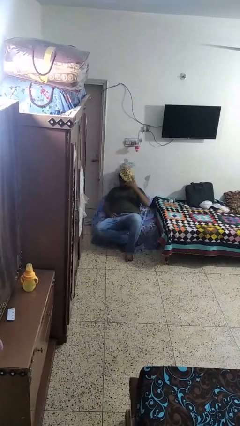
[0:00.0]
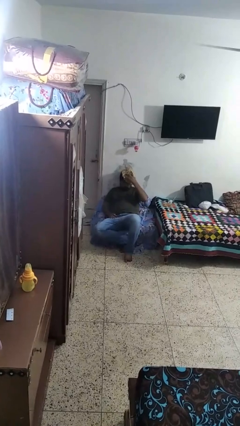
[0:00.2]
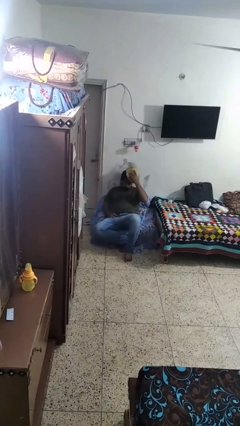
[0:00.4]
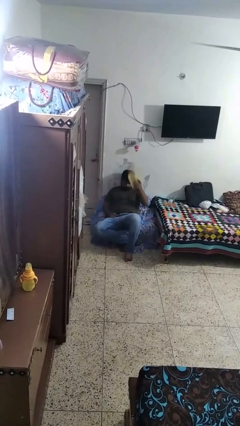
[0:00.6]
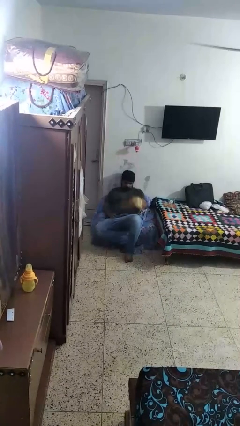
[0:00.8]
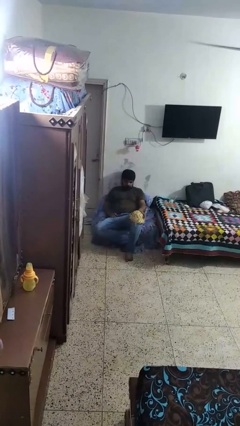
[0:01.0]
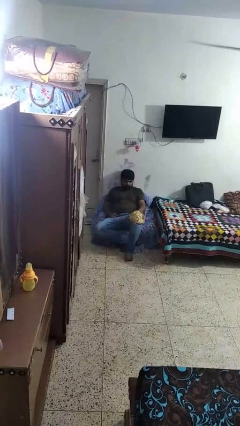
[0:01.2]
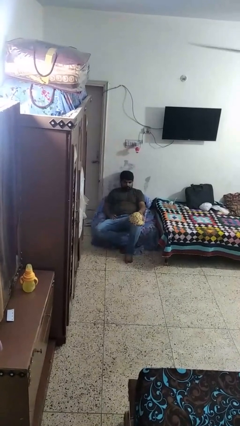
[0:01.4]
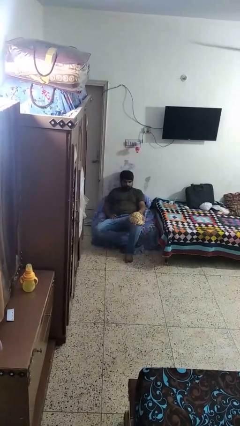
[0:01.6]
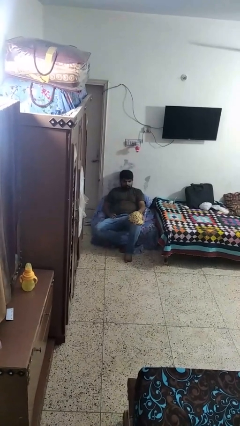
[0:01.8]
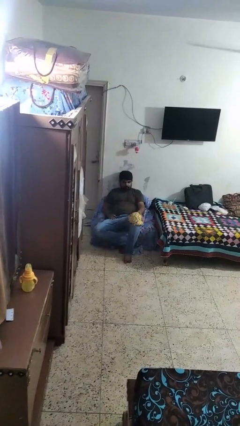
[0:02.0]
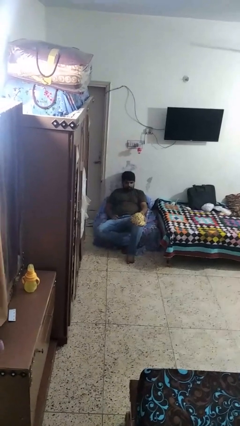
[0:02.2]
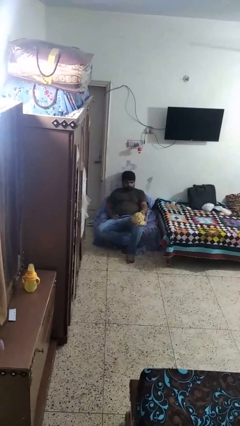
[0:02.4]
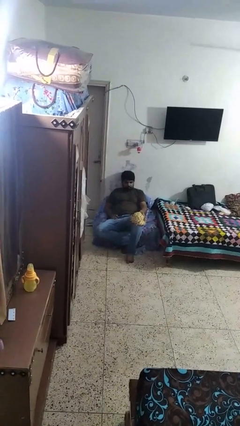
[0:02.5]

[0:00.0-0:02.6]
person takes off hat

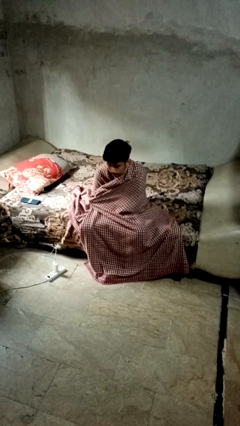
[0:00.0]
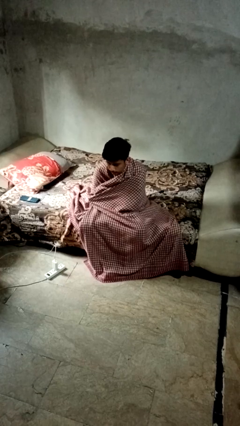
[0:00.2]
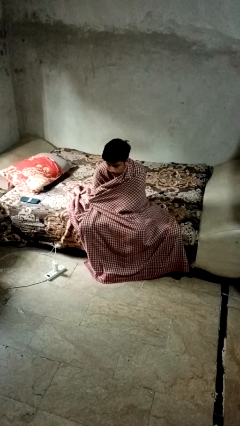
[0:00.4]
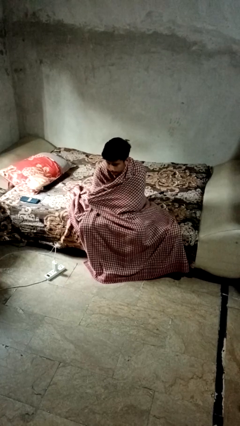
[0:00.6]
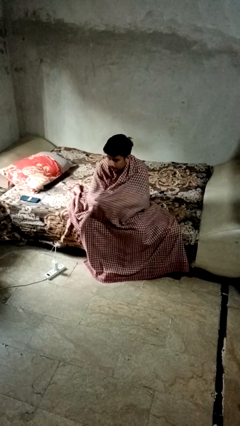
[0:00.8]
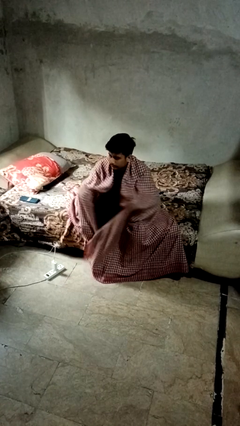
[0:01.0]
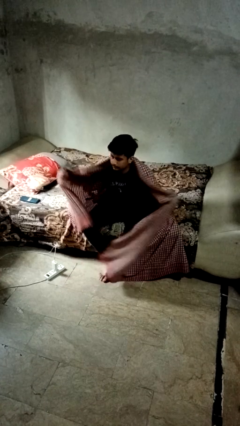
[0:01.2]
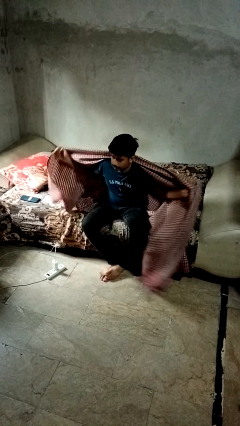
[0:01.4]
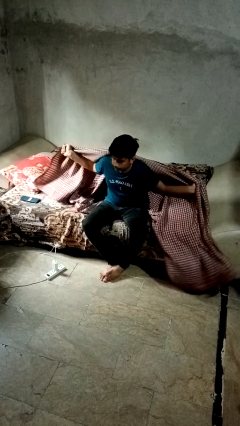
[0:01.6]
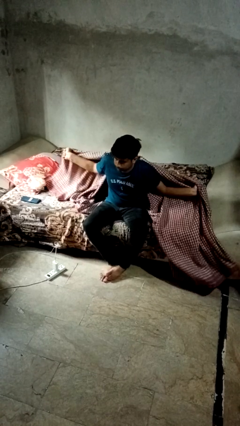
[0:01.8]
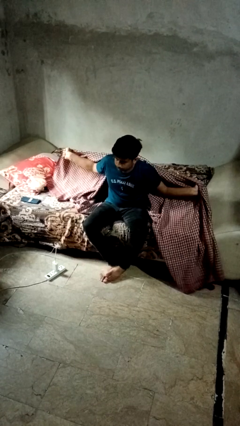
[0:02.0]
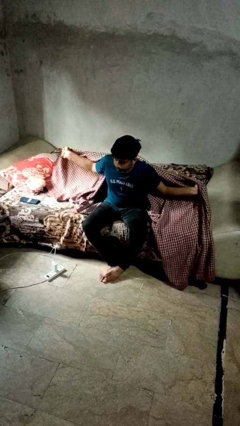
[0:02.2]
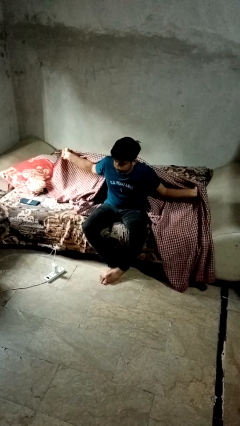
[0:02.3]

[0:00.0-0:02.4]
person uncovers with blanket

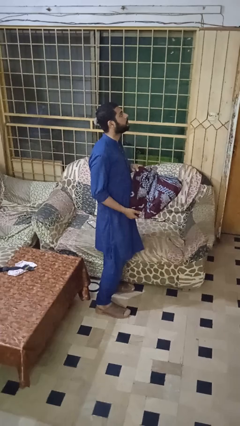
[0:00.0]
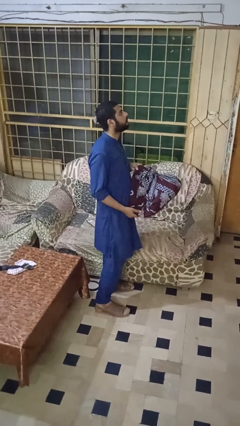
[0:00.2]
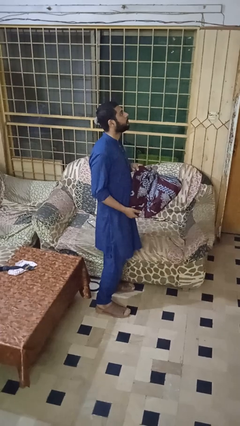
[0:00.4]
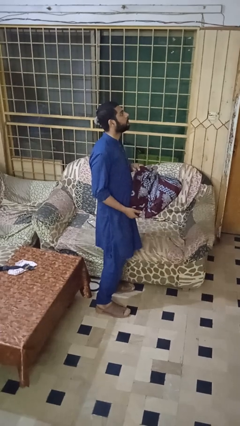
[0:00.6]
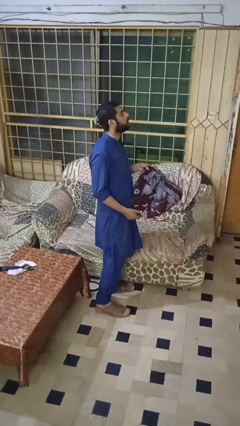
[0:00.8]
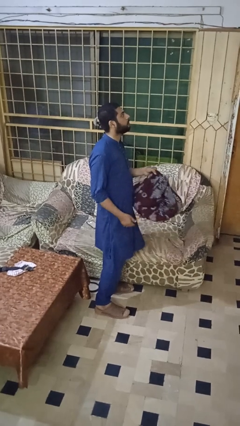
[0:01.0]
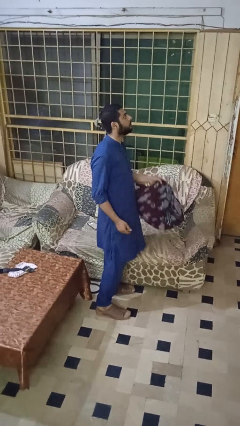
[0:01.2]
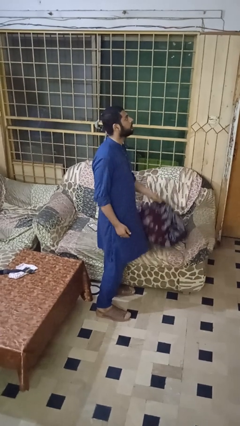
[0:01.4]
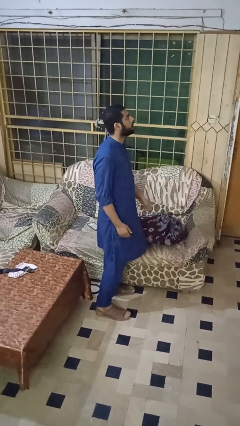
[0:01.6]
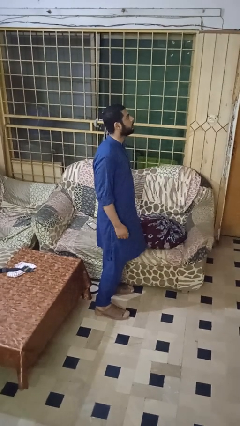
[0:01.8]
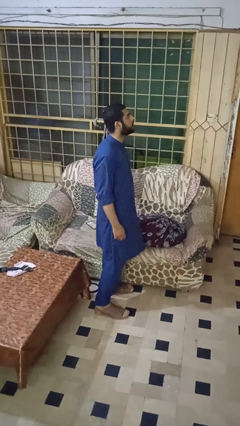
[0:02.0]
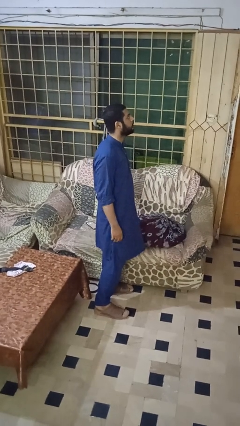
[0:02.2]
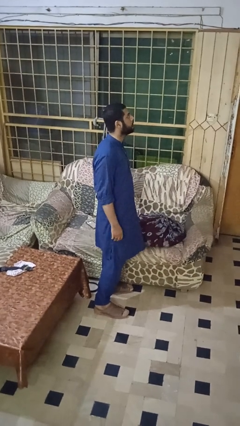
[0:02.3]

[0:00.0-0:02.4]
person puts down object on couch

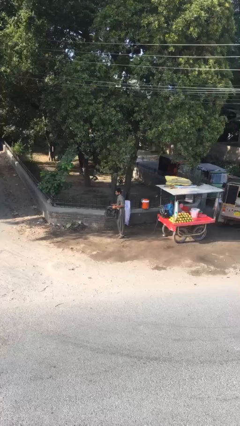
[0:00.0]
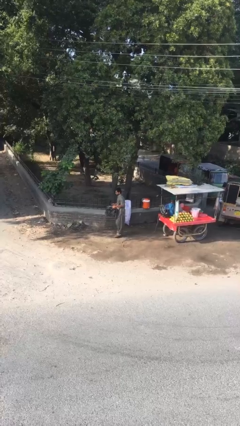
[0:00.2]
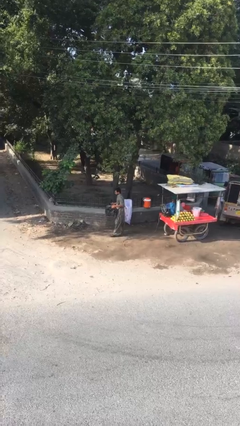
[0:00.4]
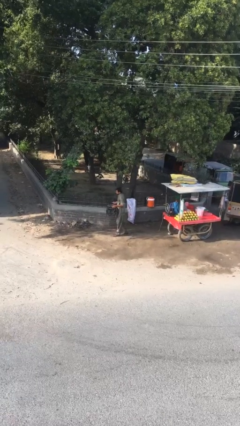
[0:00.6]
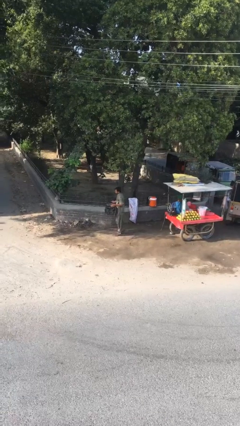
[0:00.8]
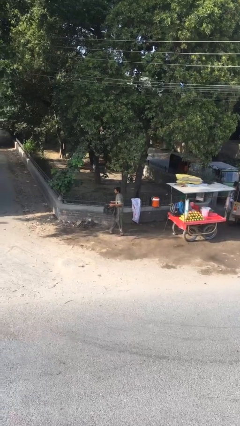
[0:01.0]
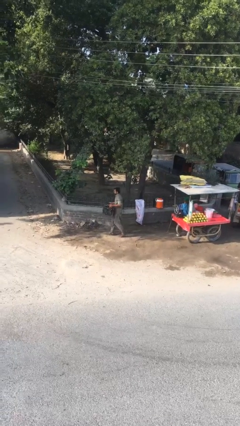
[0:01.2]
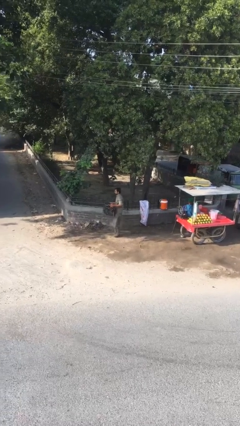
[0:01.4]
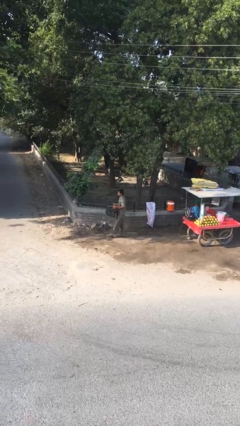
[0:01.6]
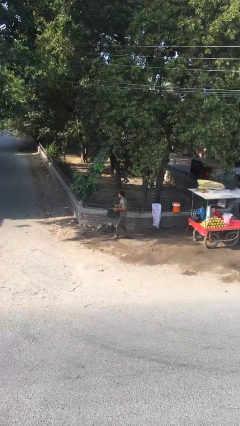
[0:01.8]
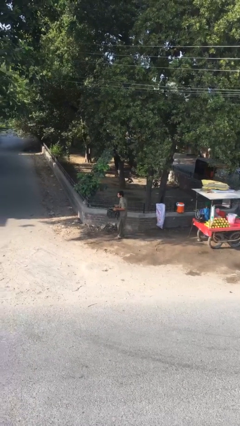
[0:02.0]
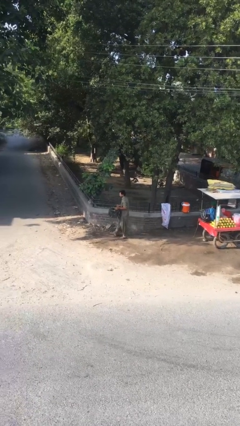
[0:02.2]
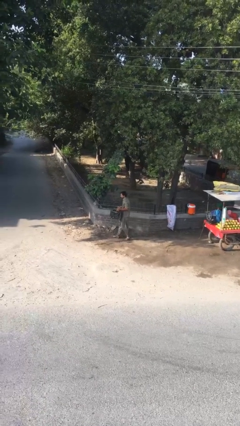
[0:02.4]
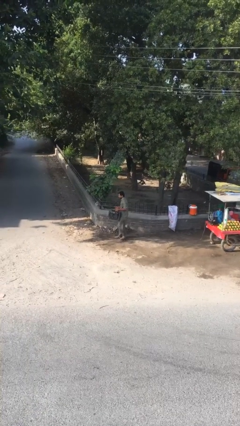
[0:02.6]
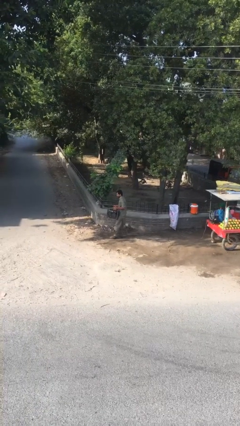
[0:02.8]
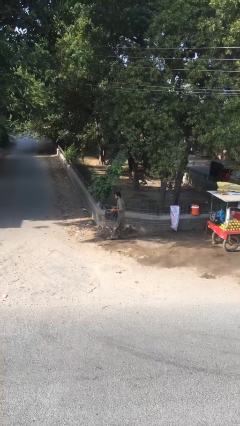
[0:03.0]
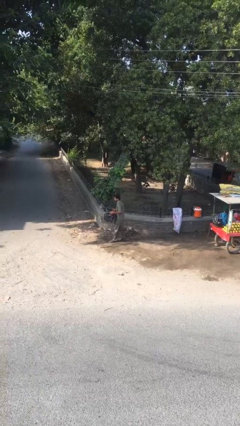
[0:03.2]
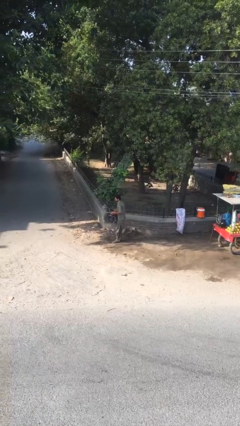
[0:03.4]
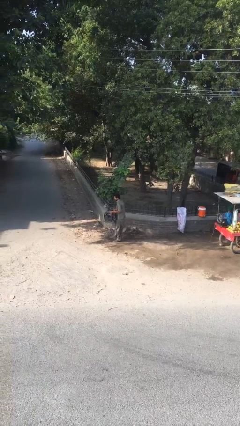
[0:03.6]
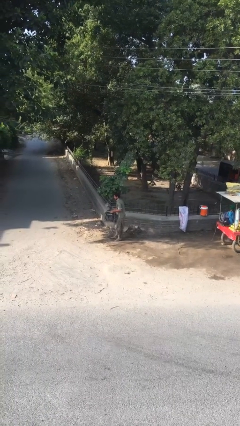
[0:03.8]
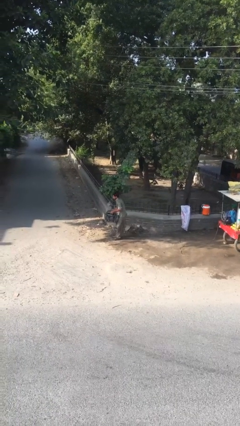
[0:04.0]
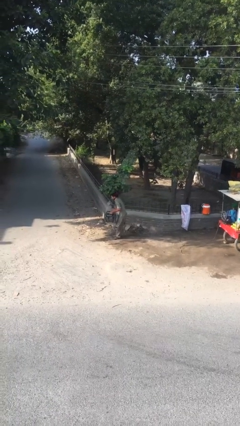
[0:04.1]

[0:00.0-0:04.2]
person carries heavy object

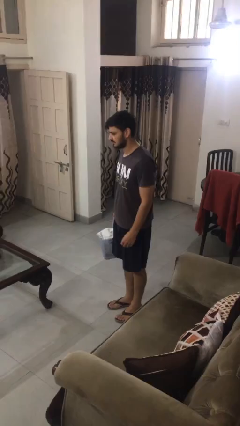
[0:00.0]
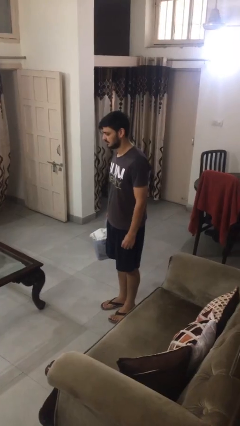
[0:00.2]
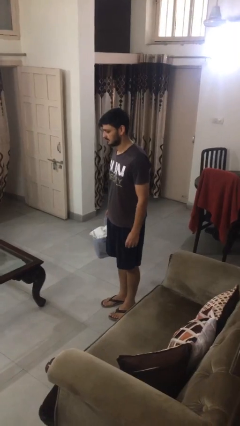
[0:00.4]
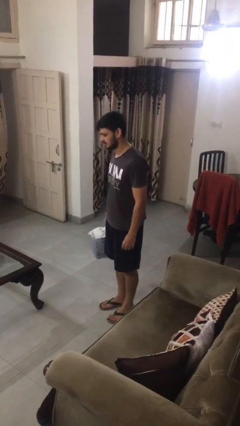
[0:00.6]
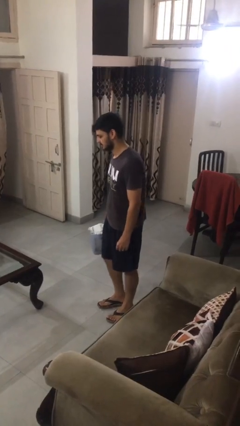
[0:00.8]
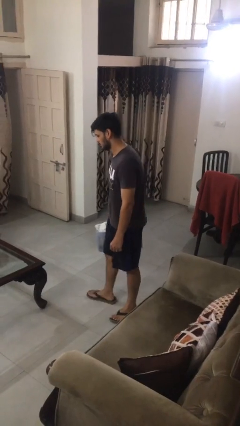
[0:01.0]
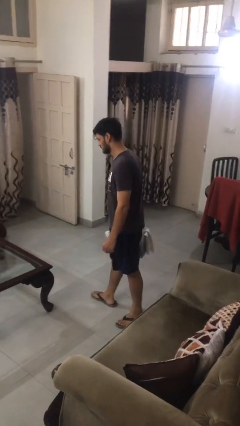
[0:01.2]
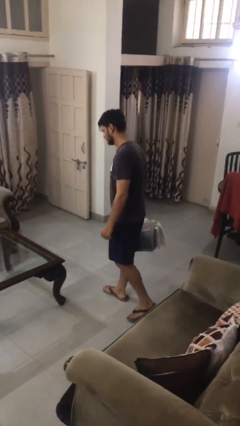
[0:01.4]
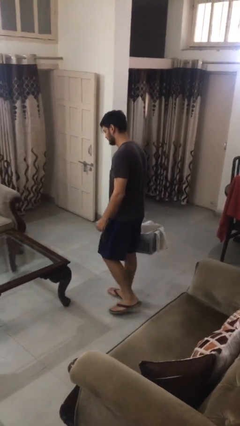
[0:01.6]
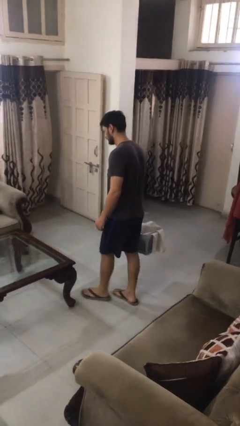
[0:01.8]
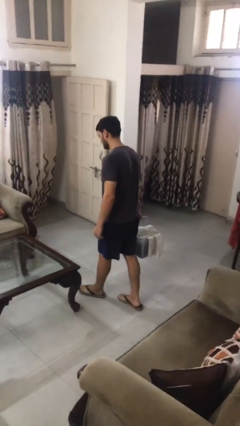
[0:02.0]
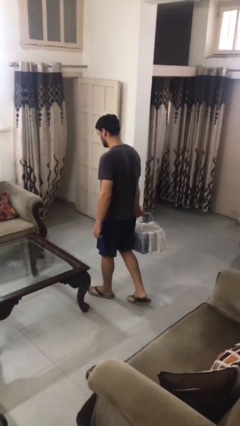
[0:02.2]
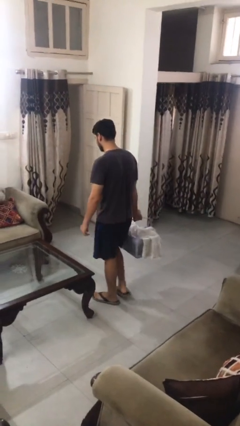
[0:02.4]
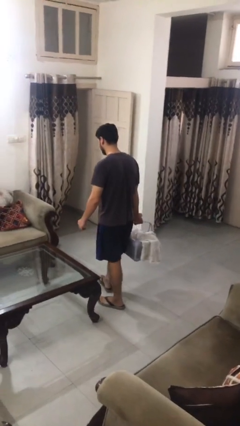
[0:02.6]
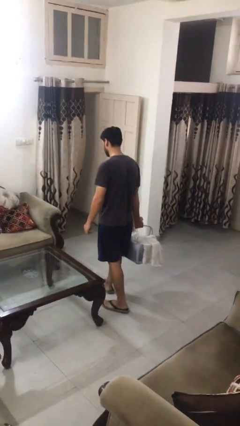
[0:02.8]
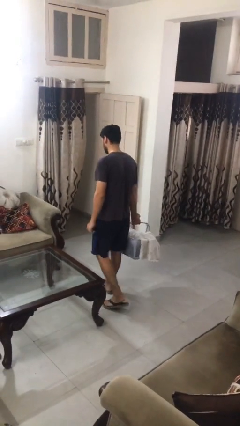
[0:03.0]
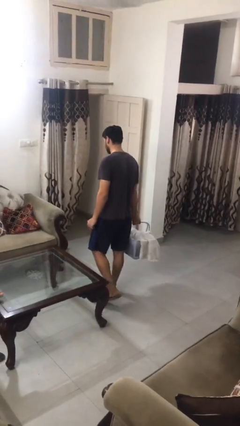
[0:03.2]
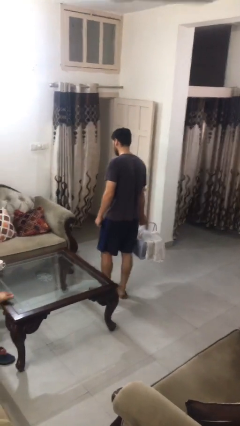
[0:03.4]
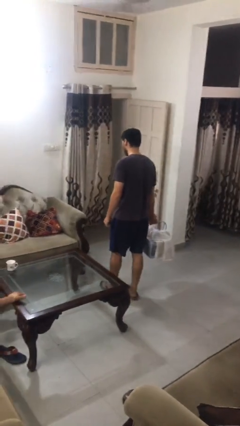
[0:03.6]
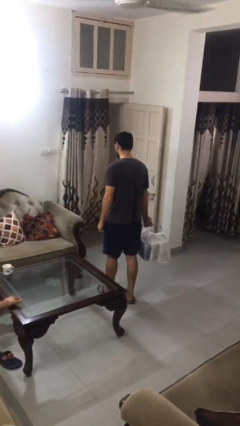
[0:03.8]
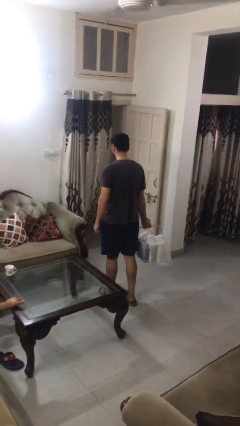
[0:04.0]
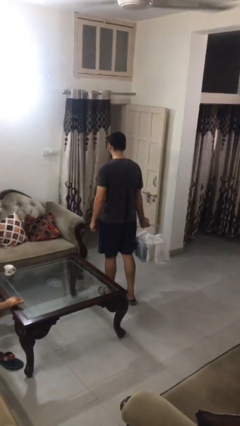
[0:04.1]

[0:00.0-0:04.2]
person carries laundry basket

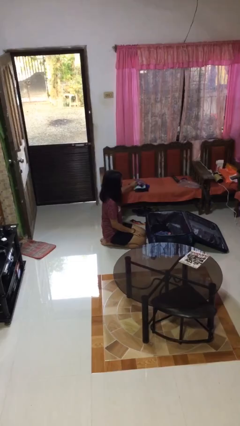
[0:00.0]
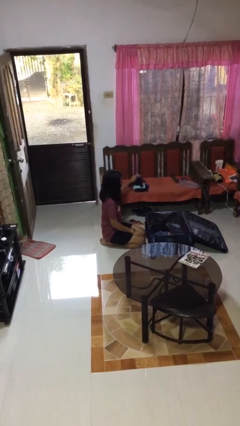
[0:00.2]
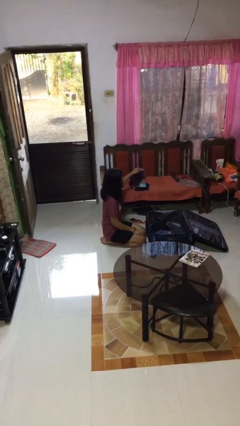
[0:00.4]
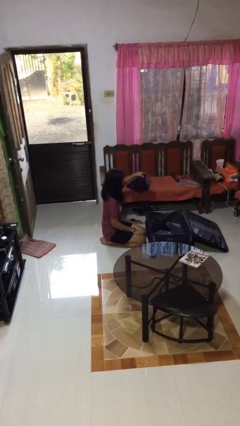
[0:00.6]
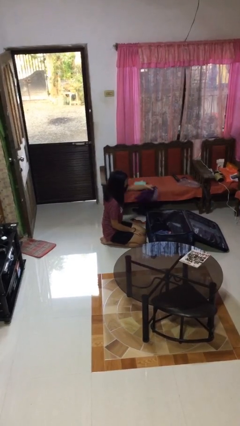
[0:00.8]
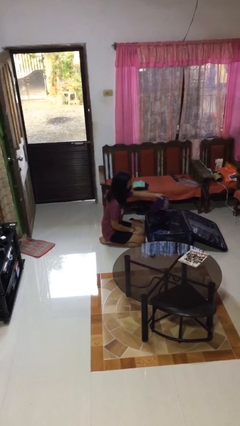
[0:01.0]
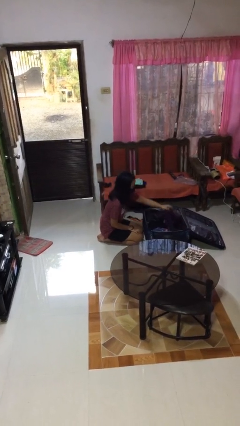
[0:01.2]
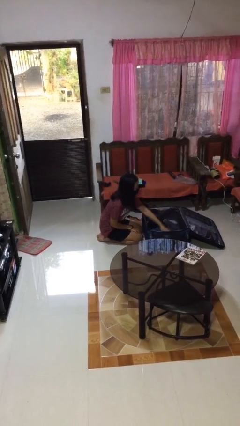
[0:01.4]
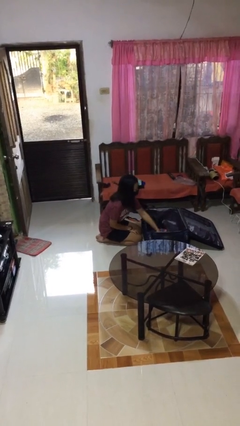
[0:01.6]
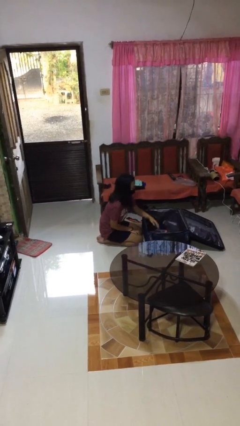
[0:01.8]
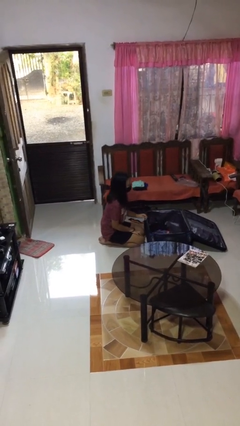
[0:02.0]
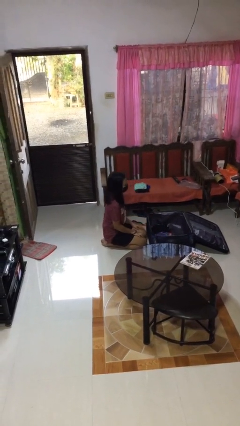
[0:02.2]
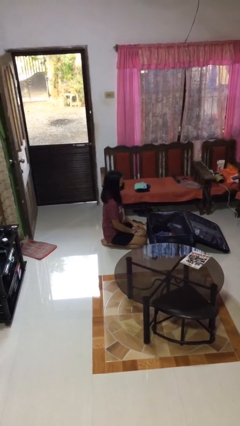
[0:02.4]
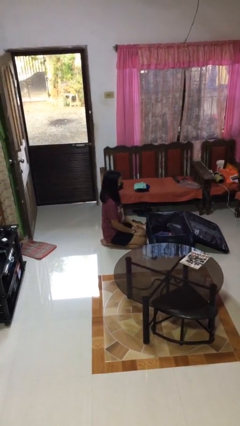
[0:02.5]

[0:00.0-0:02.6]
person loads clothes into suitcase
